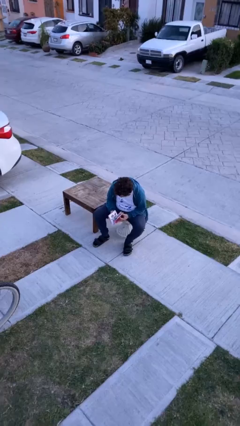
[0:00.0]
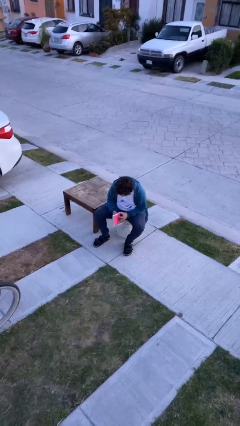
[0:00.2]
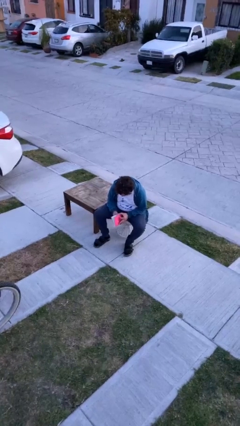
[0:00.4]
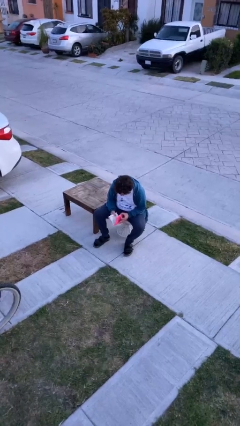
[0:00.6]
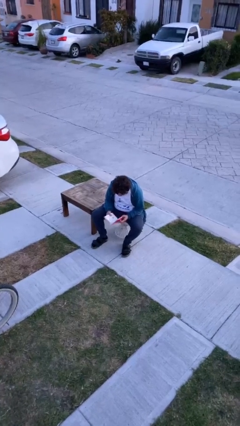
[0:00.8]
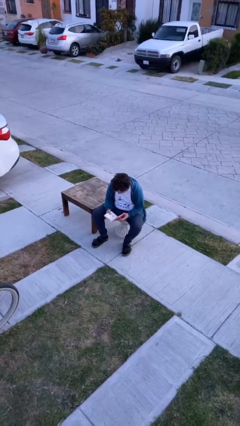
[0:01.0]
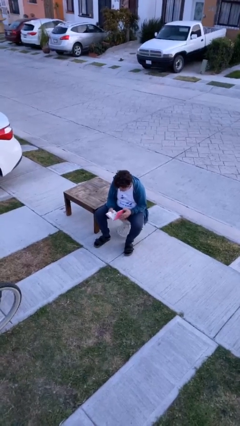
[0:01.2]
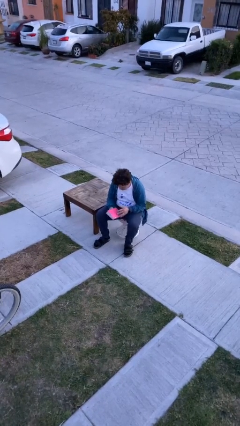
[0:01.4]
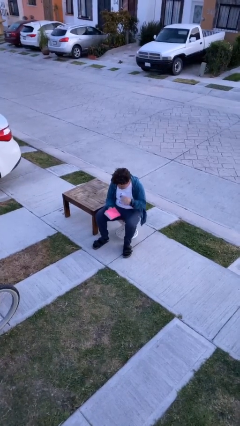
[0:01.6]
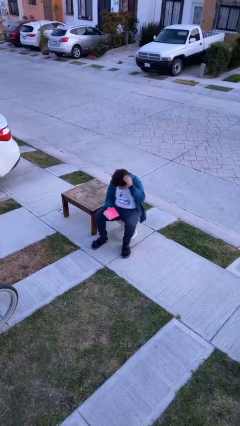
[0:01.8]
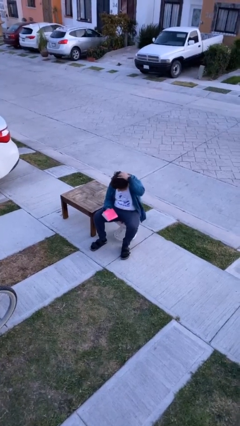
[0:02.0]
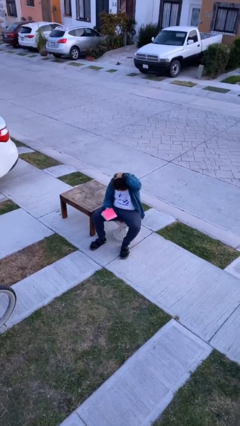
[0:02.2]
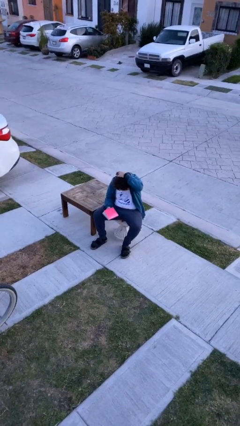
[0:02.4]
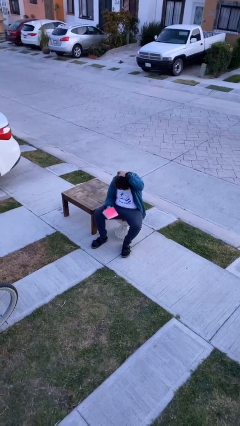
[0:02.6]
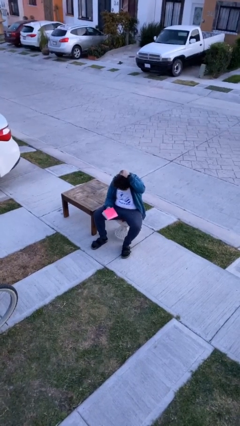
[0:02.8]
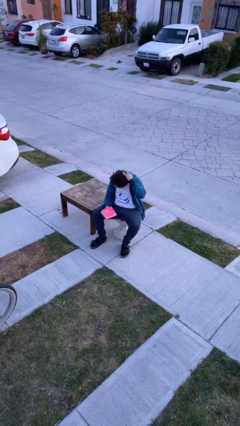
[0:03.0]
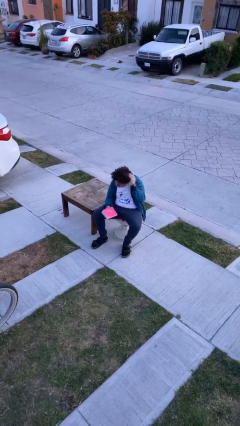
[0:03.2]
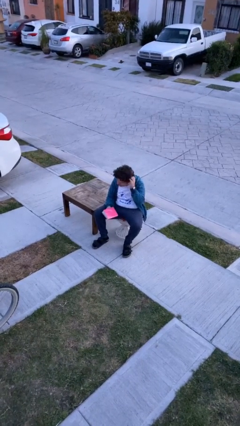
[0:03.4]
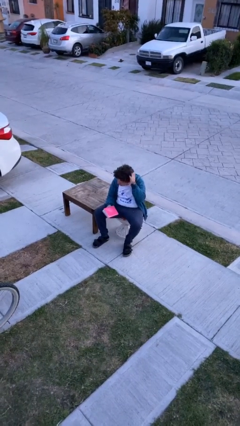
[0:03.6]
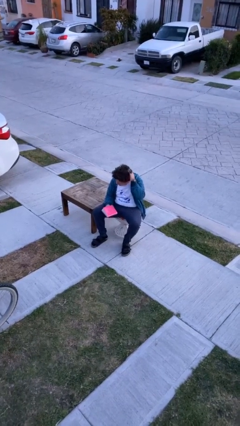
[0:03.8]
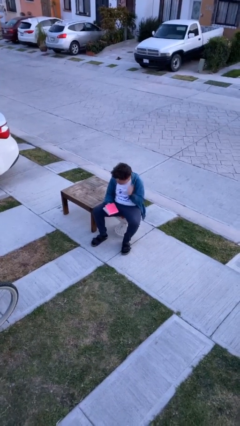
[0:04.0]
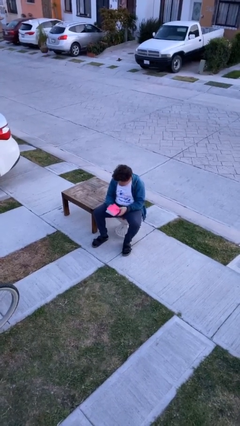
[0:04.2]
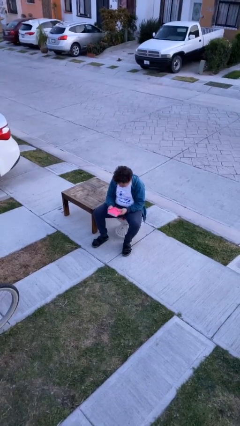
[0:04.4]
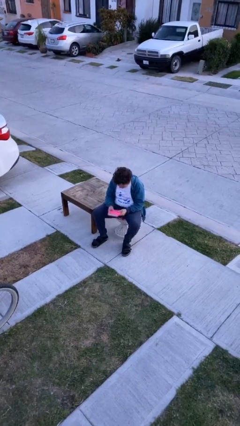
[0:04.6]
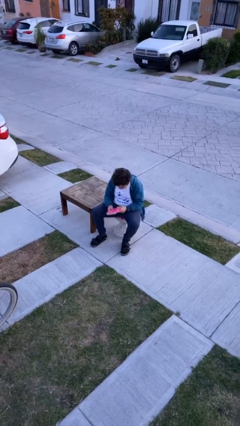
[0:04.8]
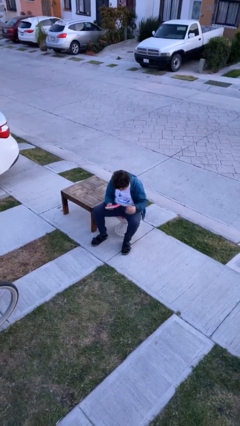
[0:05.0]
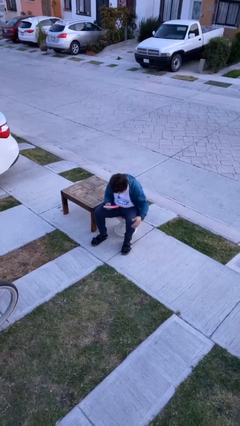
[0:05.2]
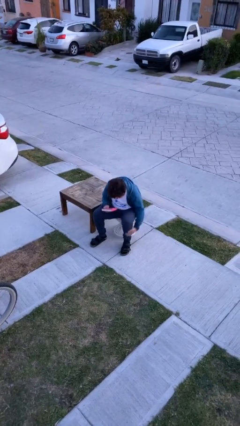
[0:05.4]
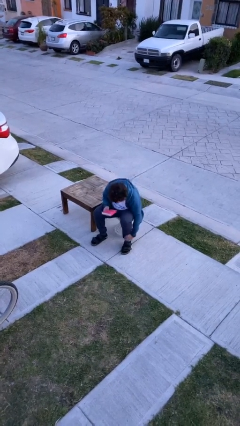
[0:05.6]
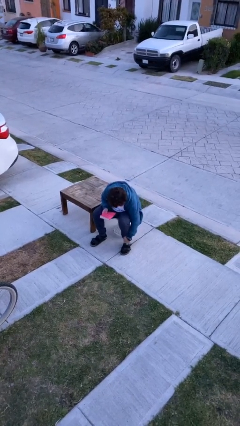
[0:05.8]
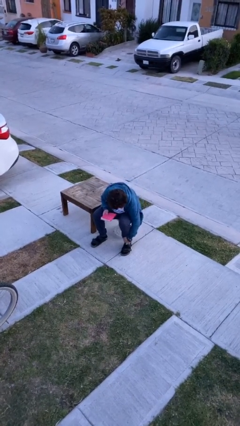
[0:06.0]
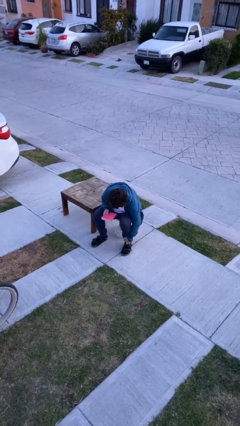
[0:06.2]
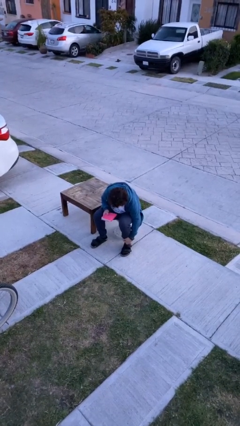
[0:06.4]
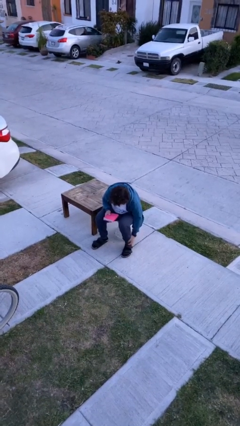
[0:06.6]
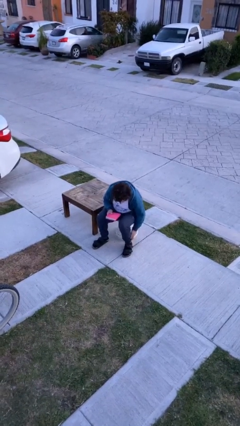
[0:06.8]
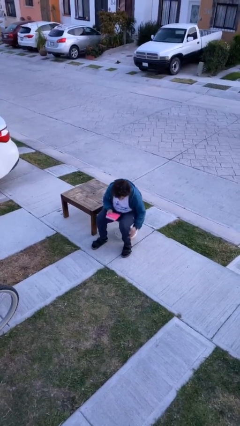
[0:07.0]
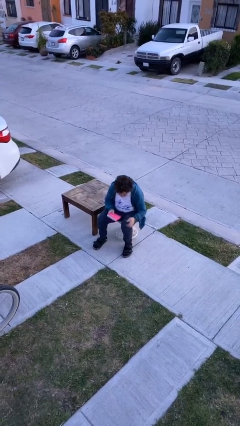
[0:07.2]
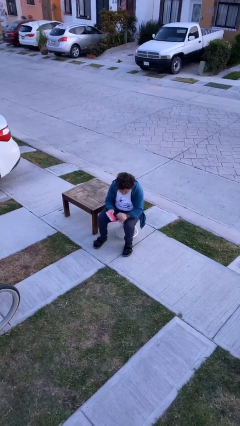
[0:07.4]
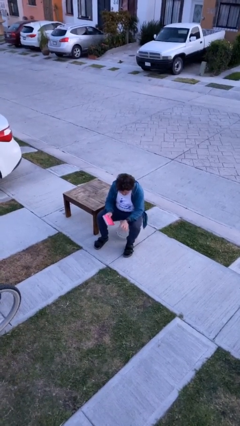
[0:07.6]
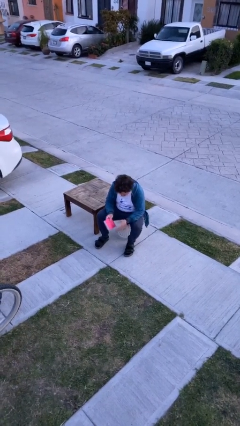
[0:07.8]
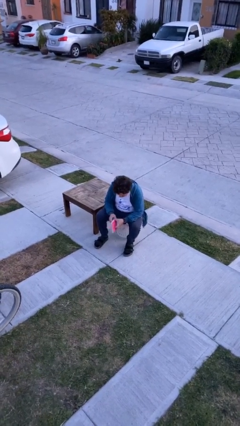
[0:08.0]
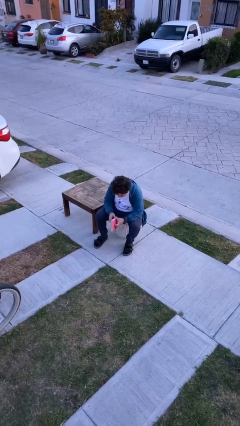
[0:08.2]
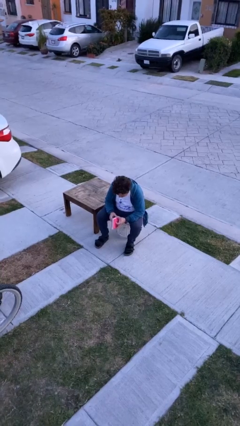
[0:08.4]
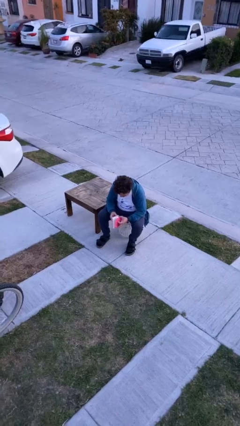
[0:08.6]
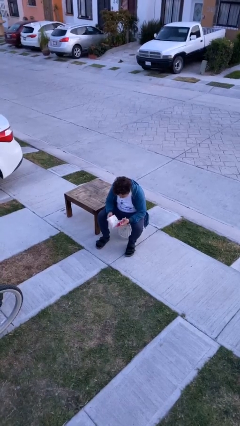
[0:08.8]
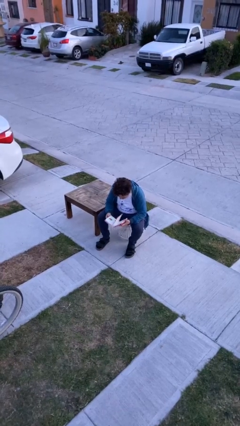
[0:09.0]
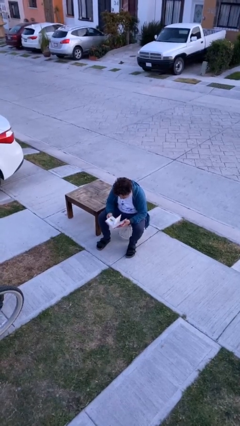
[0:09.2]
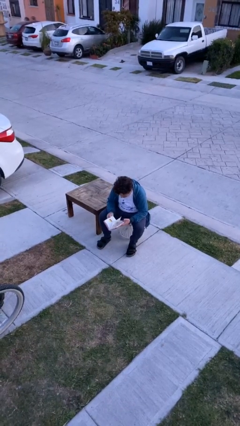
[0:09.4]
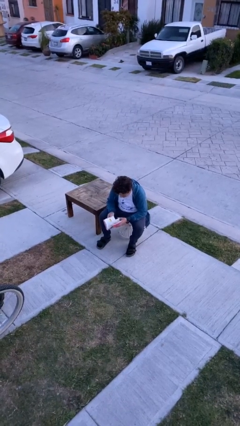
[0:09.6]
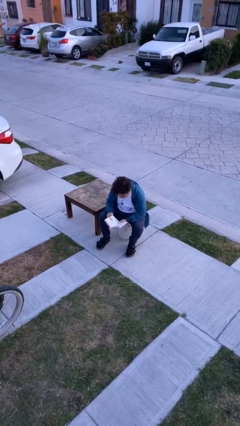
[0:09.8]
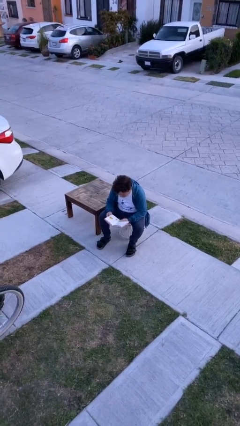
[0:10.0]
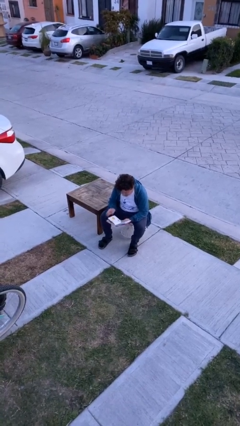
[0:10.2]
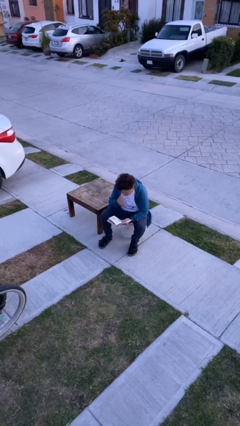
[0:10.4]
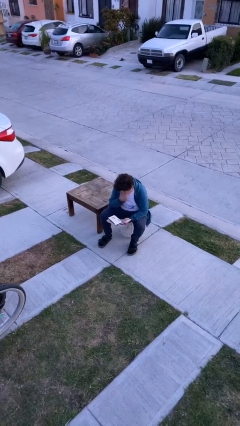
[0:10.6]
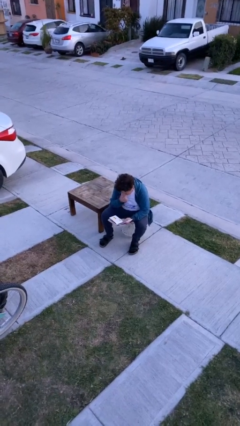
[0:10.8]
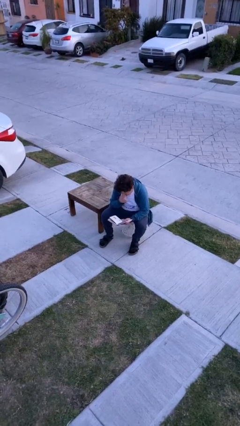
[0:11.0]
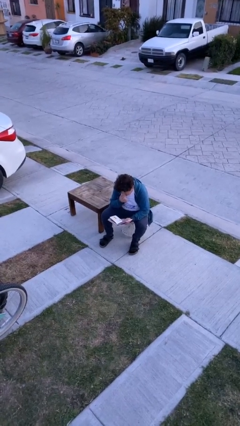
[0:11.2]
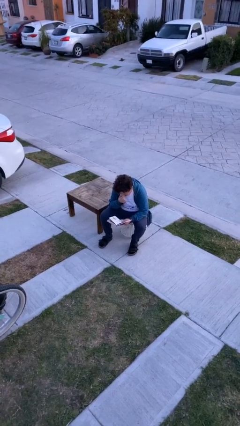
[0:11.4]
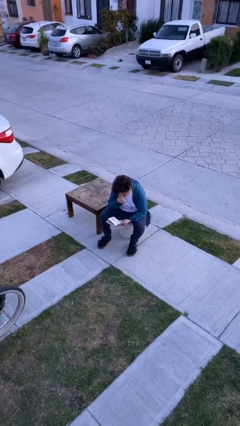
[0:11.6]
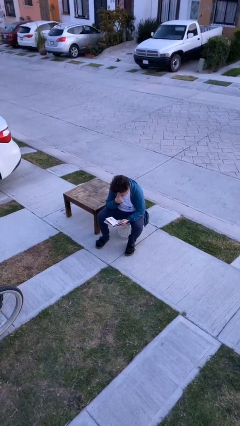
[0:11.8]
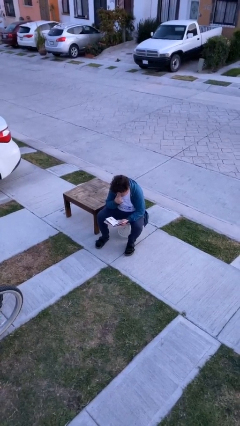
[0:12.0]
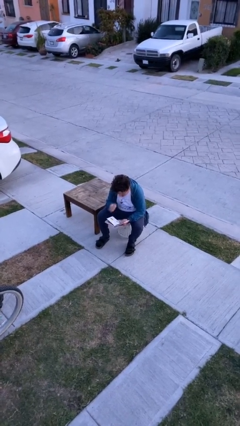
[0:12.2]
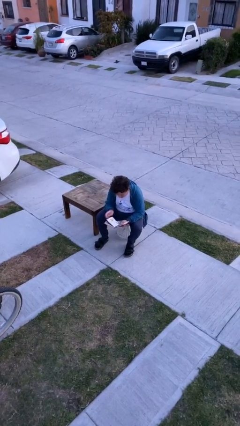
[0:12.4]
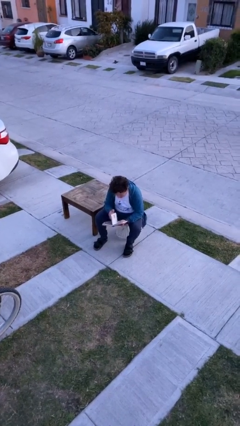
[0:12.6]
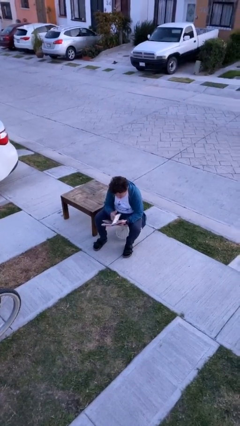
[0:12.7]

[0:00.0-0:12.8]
person reads document

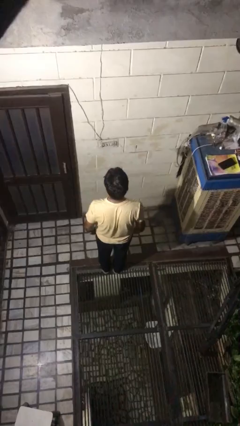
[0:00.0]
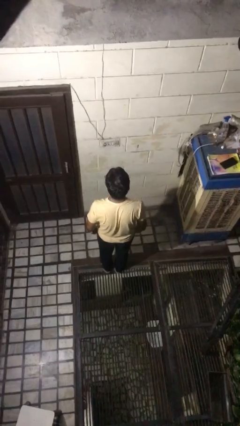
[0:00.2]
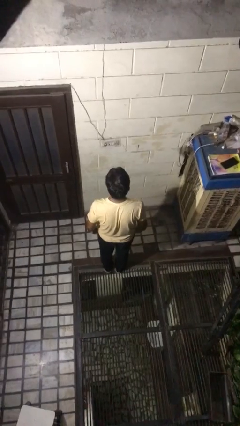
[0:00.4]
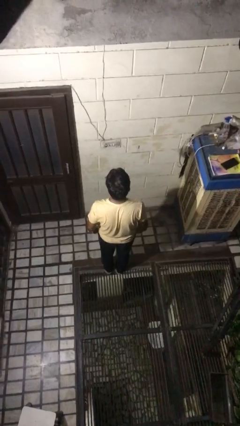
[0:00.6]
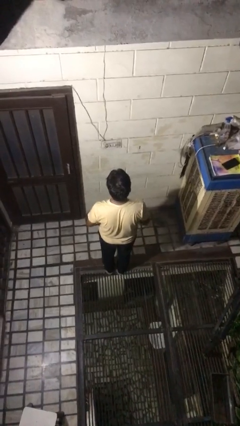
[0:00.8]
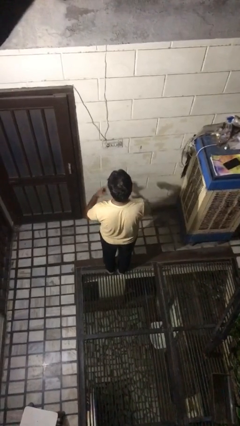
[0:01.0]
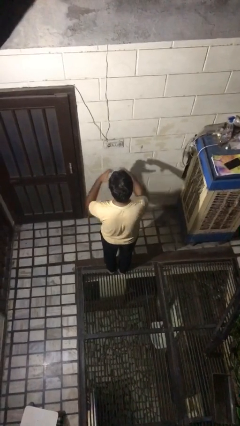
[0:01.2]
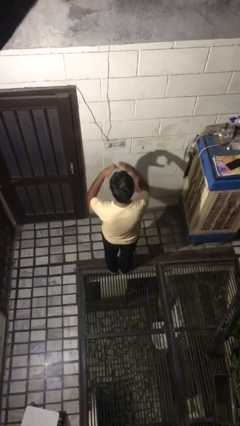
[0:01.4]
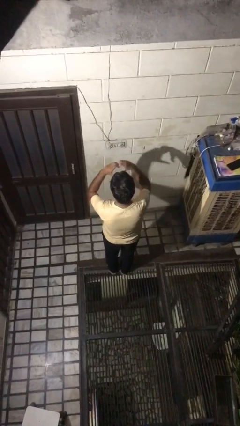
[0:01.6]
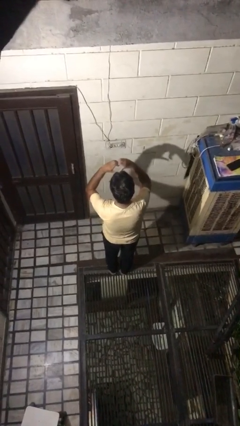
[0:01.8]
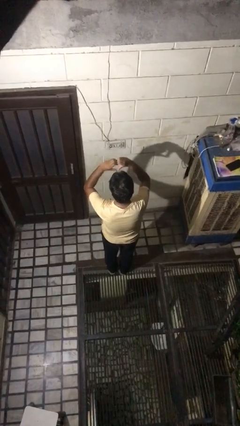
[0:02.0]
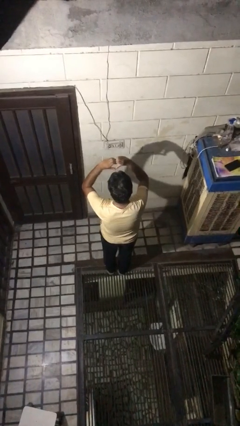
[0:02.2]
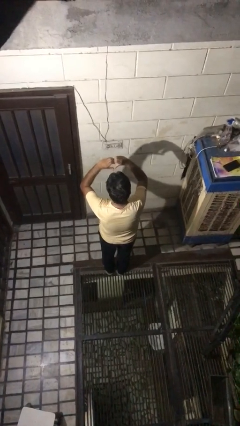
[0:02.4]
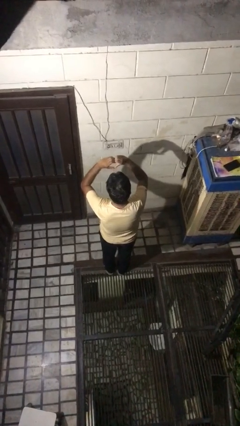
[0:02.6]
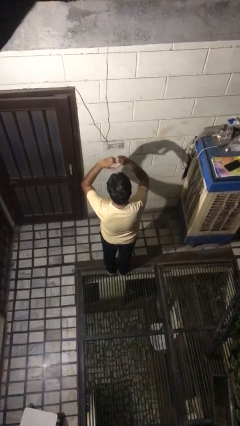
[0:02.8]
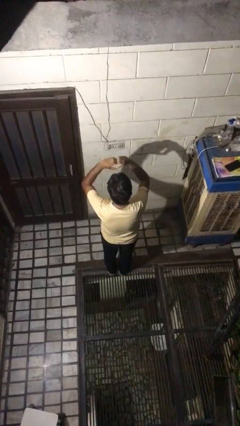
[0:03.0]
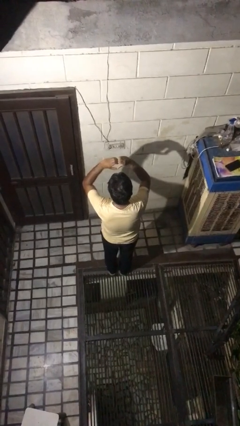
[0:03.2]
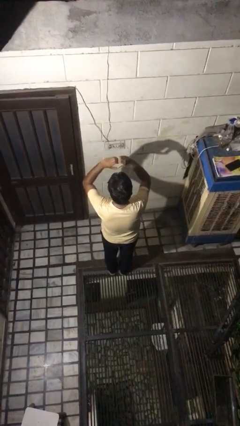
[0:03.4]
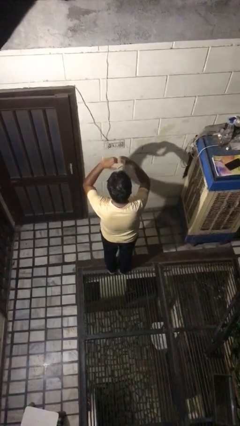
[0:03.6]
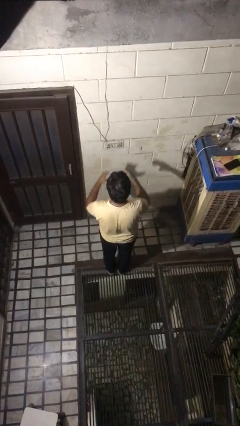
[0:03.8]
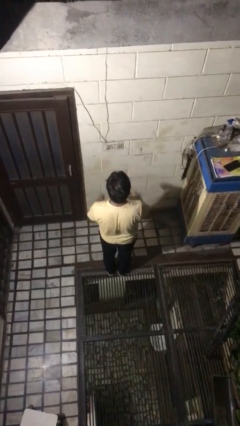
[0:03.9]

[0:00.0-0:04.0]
person gestures heart

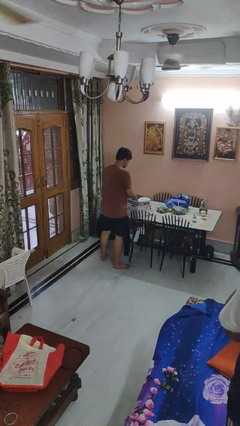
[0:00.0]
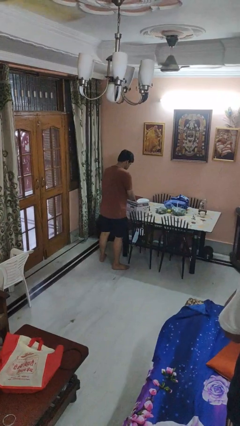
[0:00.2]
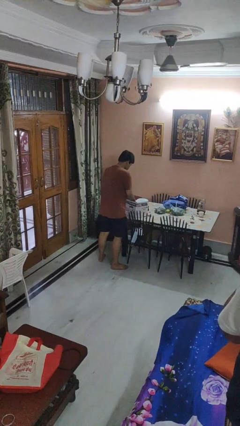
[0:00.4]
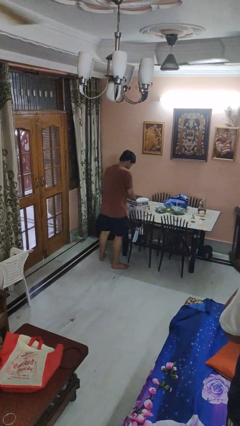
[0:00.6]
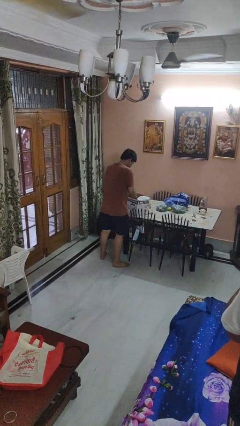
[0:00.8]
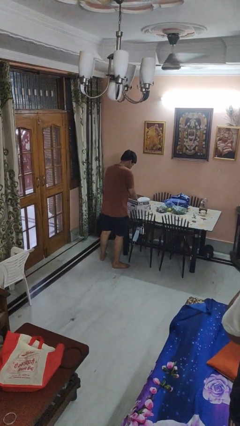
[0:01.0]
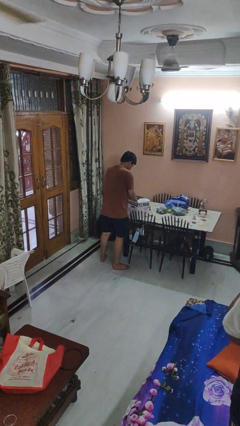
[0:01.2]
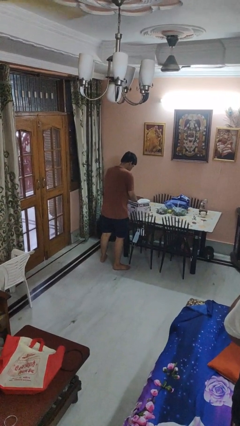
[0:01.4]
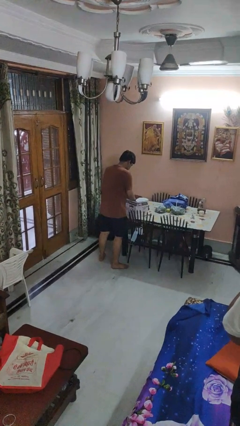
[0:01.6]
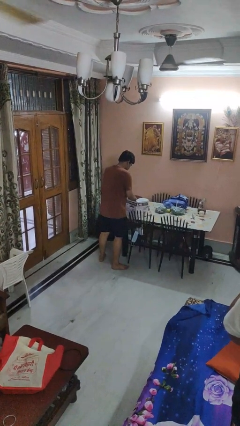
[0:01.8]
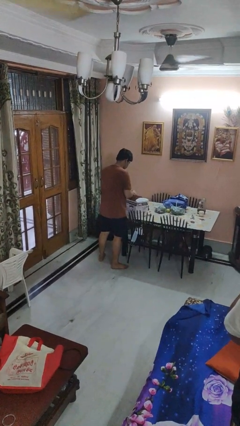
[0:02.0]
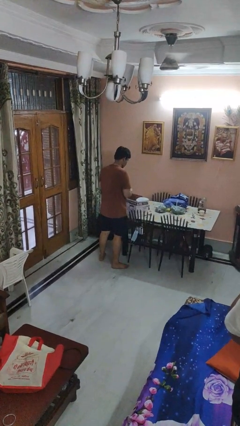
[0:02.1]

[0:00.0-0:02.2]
person searches in box
